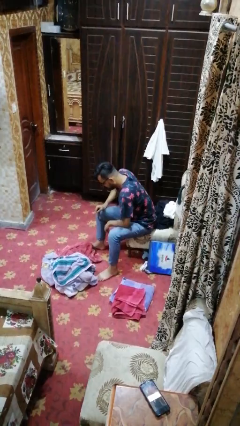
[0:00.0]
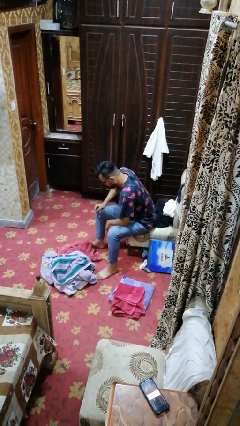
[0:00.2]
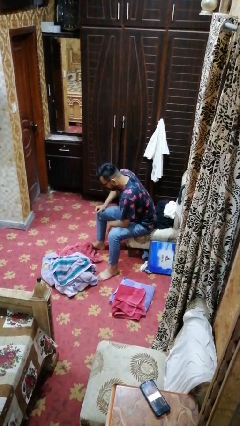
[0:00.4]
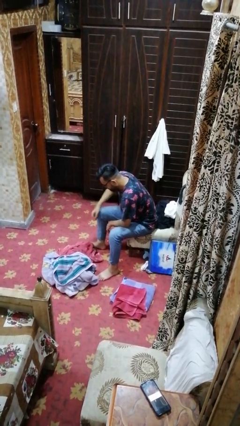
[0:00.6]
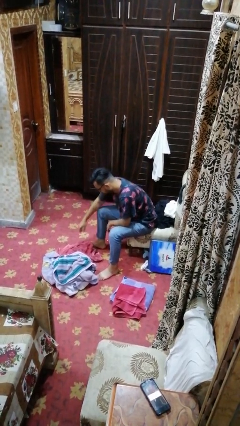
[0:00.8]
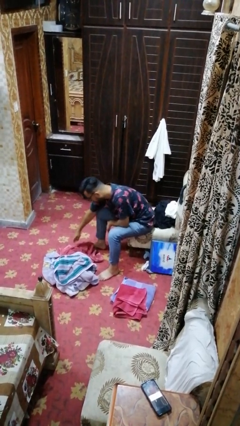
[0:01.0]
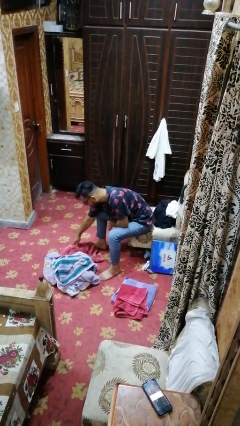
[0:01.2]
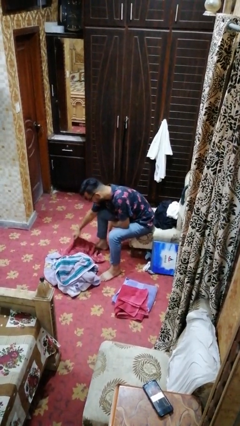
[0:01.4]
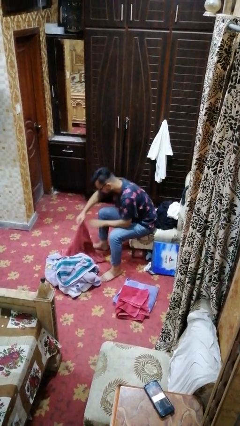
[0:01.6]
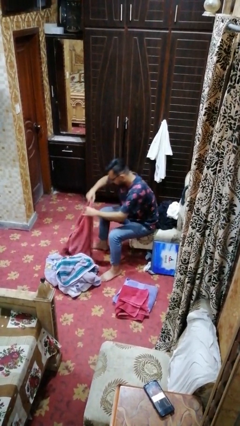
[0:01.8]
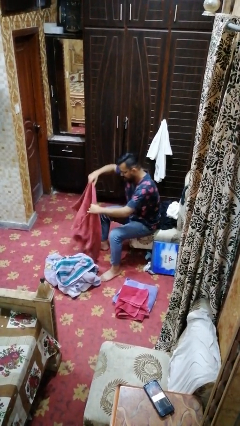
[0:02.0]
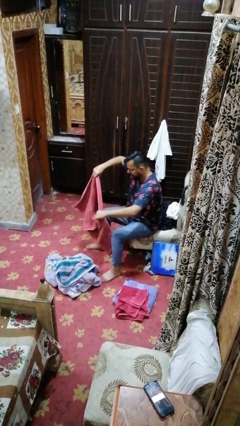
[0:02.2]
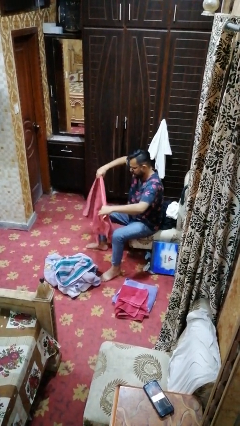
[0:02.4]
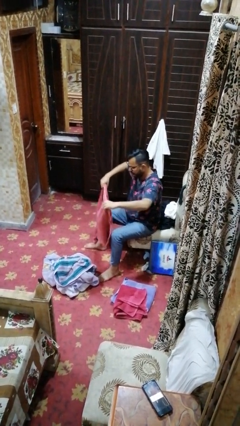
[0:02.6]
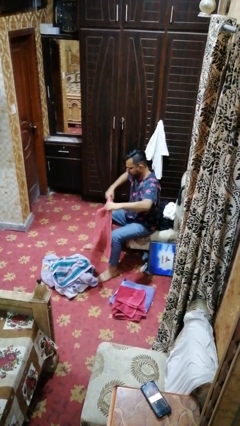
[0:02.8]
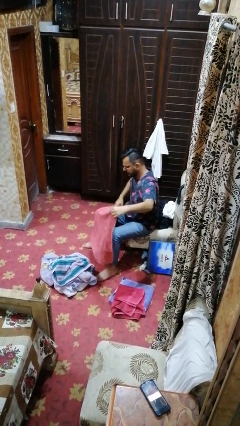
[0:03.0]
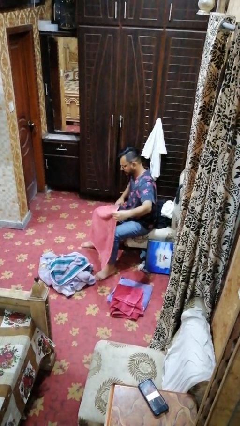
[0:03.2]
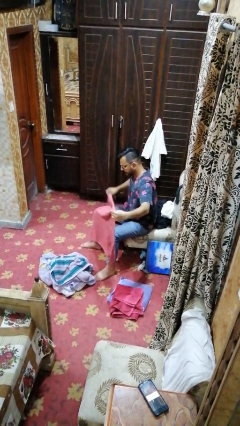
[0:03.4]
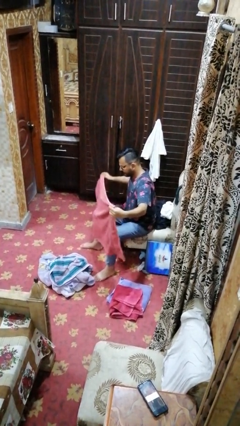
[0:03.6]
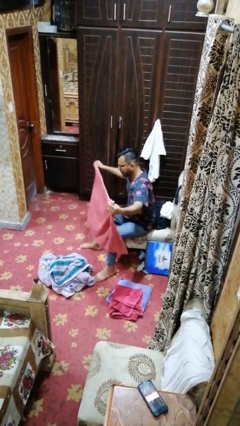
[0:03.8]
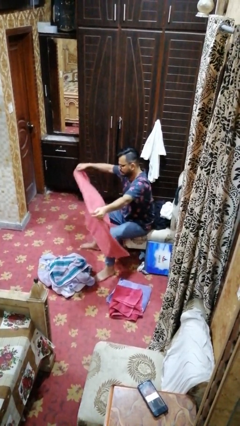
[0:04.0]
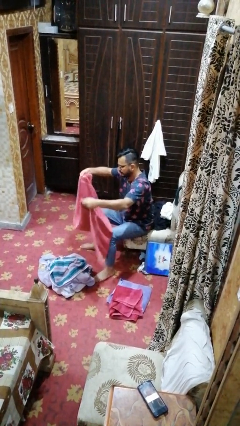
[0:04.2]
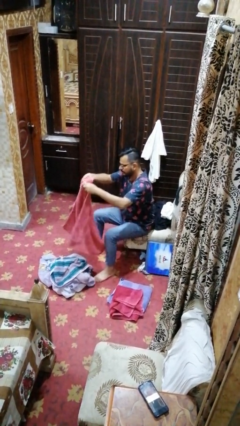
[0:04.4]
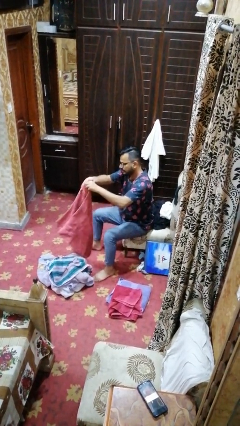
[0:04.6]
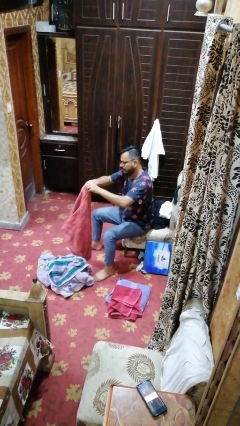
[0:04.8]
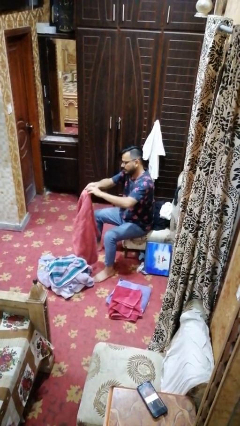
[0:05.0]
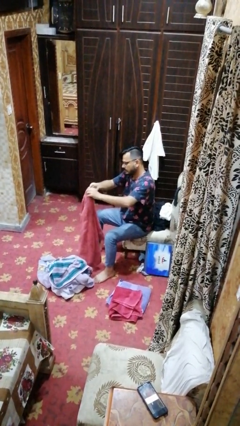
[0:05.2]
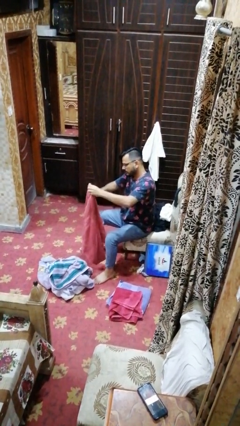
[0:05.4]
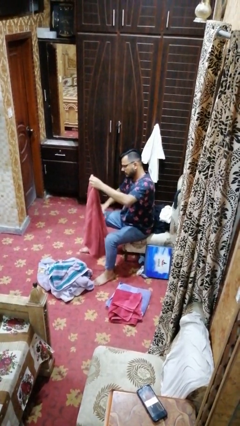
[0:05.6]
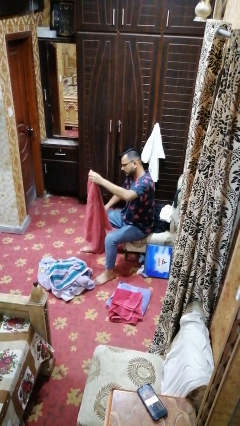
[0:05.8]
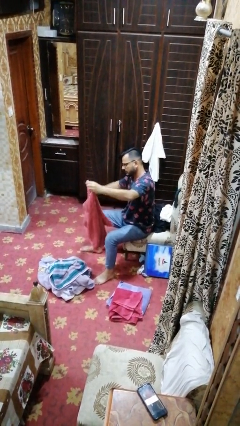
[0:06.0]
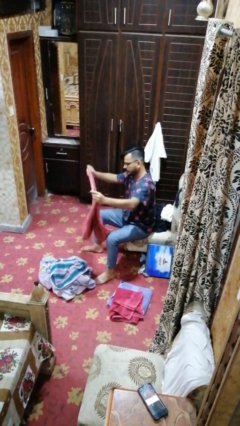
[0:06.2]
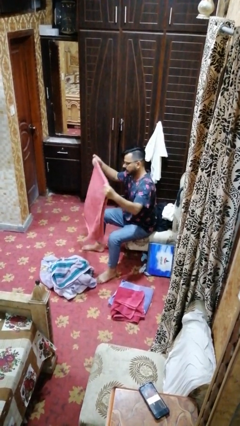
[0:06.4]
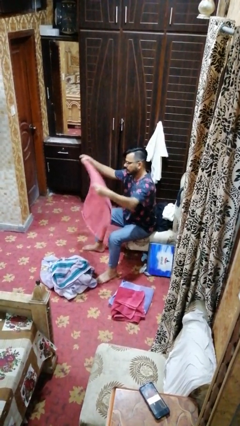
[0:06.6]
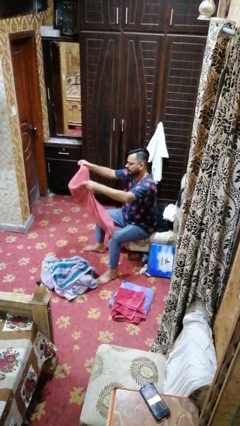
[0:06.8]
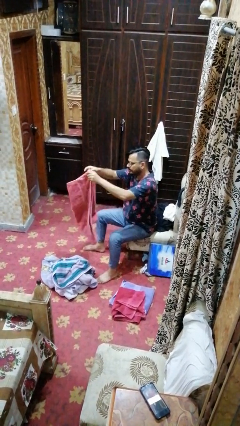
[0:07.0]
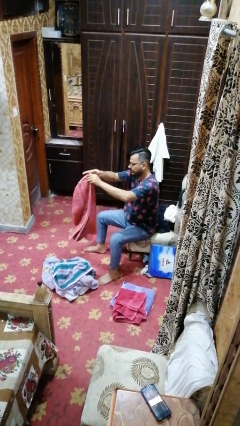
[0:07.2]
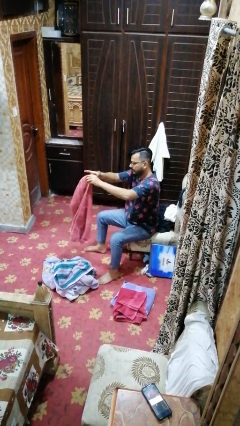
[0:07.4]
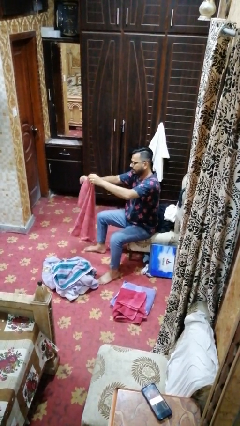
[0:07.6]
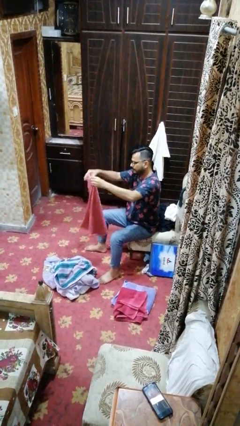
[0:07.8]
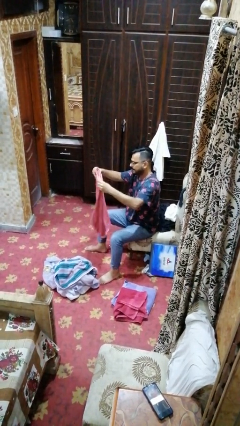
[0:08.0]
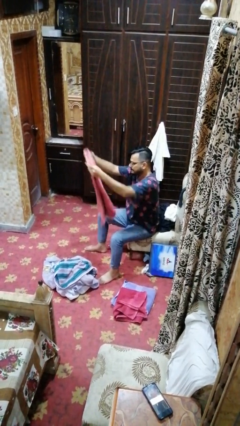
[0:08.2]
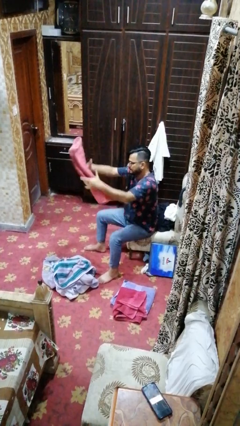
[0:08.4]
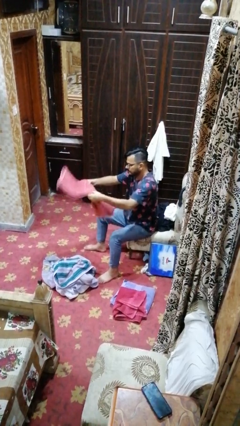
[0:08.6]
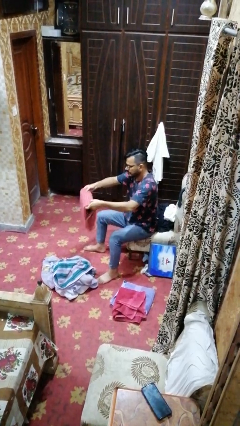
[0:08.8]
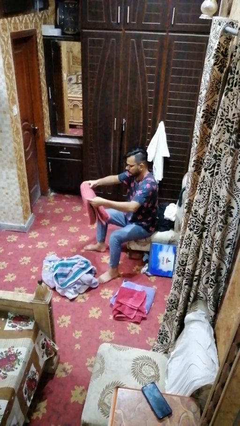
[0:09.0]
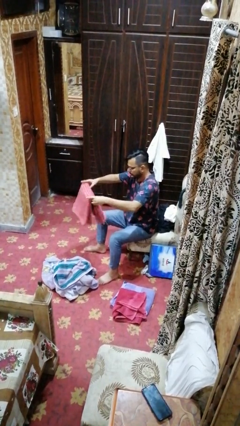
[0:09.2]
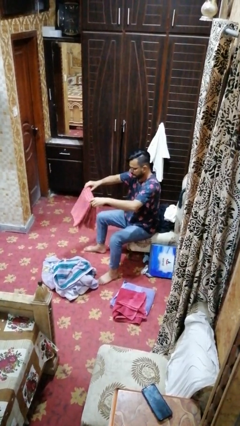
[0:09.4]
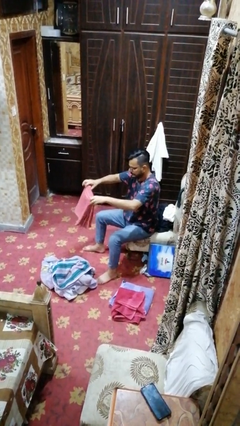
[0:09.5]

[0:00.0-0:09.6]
person folds towel

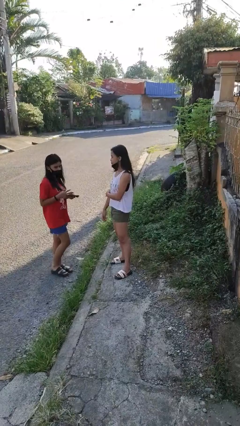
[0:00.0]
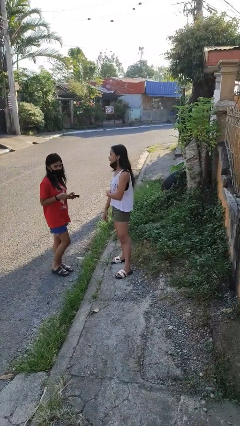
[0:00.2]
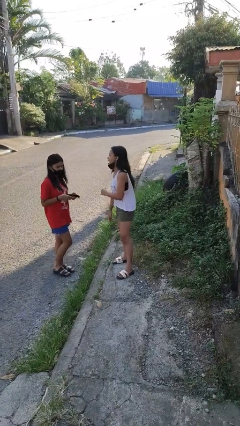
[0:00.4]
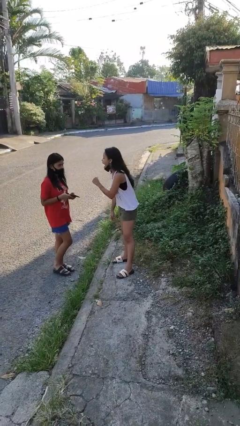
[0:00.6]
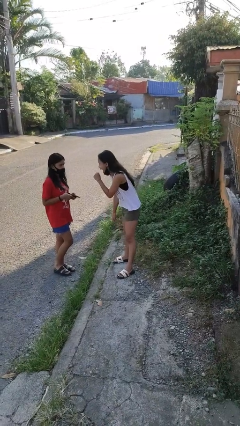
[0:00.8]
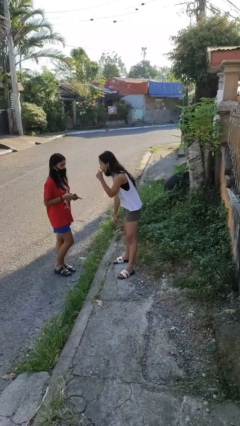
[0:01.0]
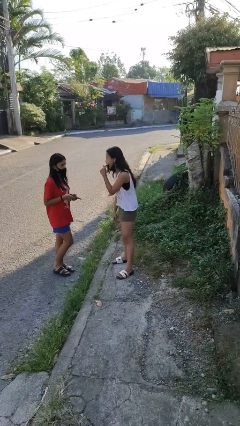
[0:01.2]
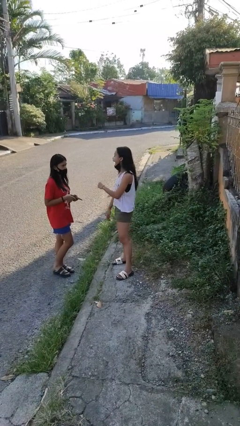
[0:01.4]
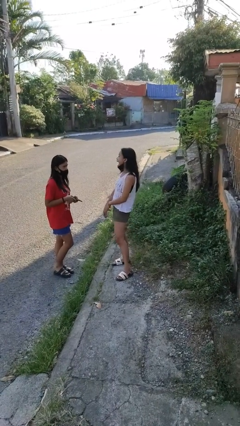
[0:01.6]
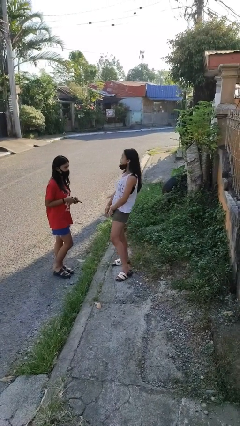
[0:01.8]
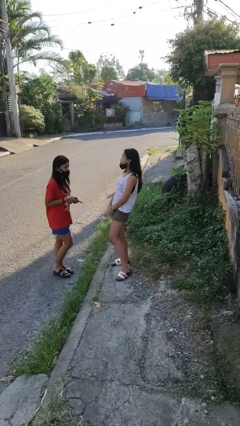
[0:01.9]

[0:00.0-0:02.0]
person laughs with person

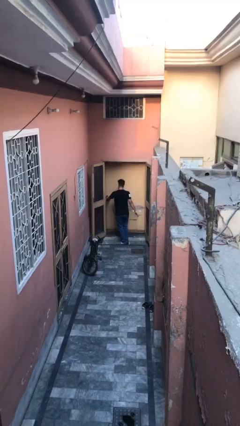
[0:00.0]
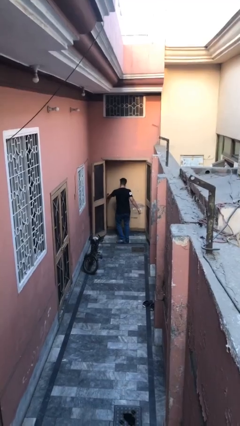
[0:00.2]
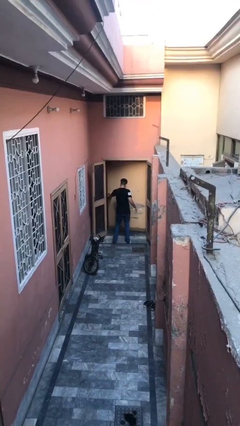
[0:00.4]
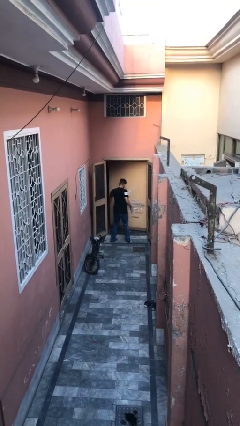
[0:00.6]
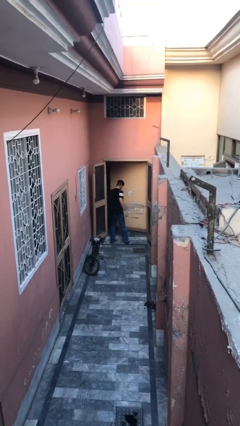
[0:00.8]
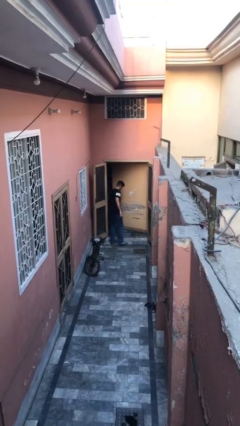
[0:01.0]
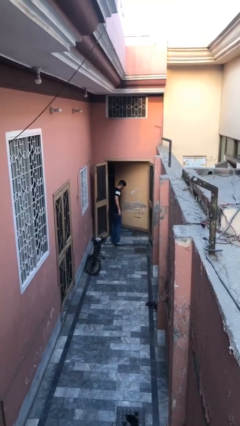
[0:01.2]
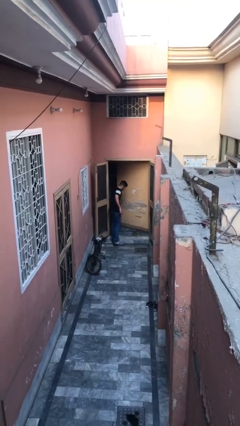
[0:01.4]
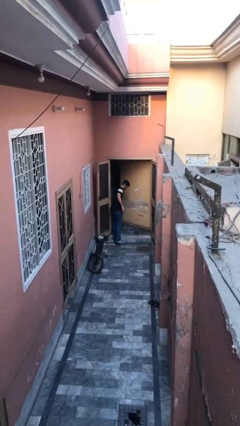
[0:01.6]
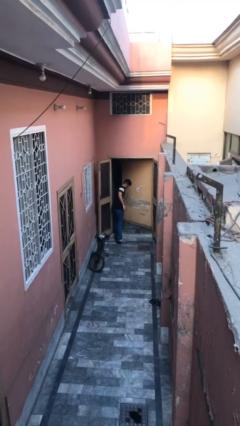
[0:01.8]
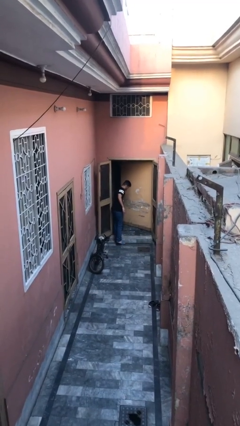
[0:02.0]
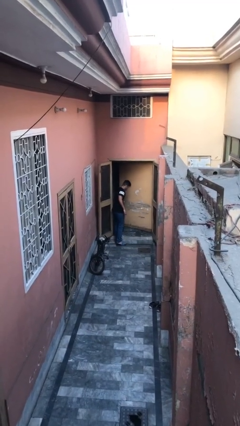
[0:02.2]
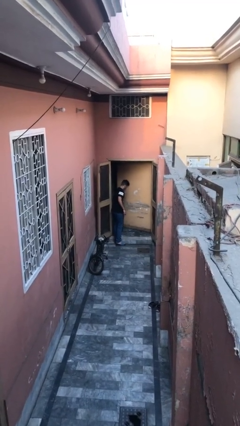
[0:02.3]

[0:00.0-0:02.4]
person opens facility door

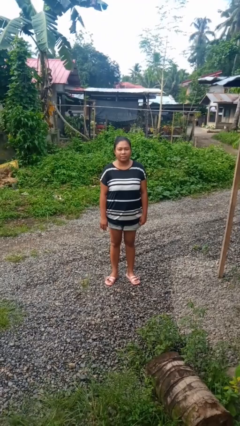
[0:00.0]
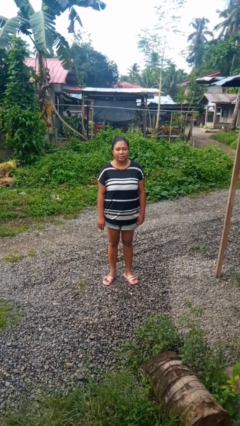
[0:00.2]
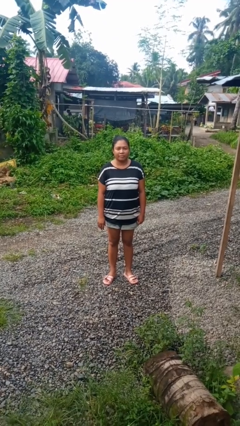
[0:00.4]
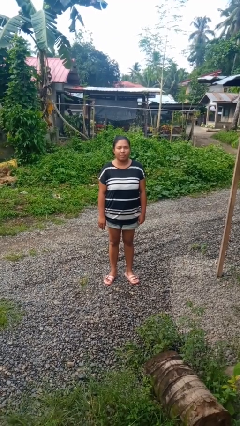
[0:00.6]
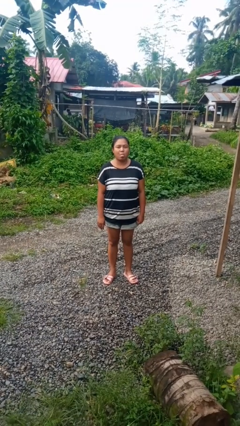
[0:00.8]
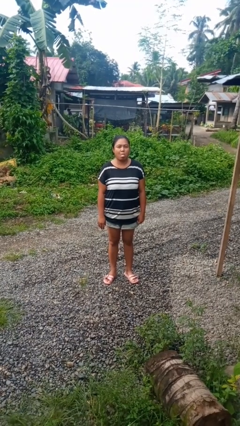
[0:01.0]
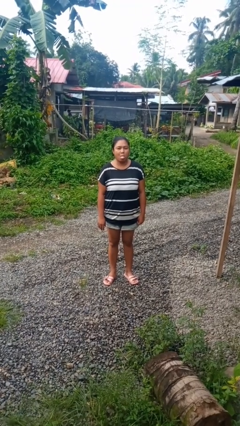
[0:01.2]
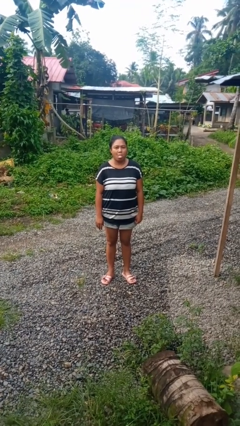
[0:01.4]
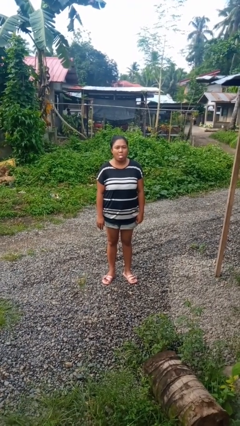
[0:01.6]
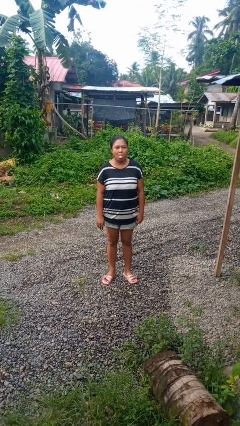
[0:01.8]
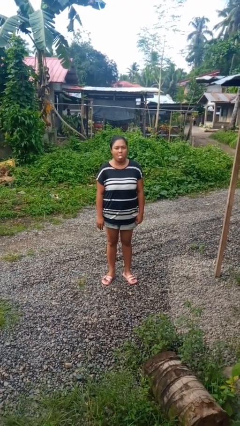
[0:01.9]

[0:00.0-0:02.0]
person sticks out tongue

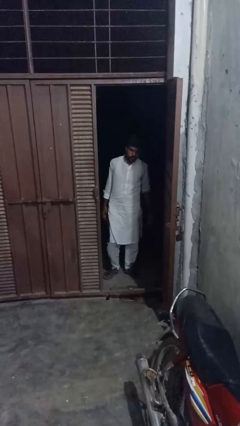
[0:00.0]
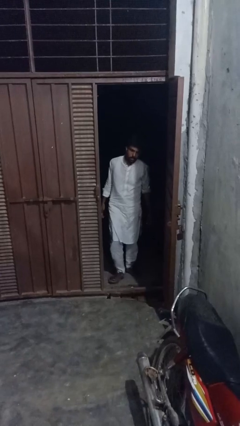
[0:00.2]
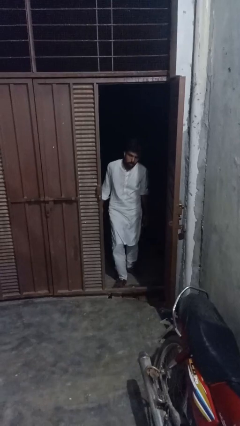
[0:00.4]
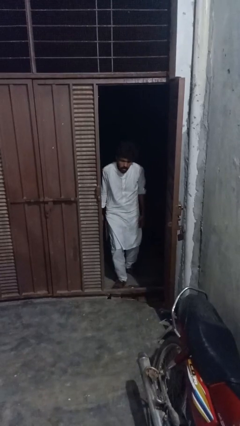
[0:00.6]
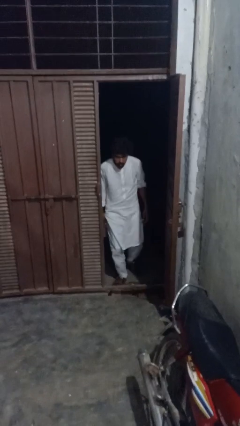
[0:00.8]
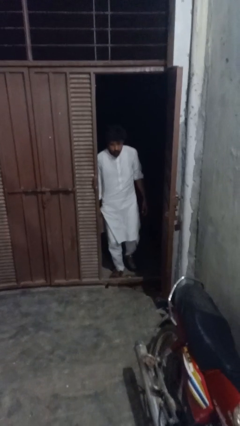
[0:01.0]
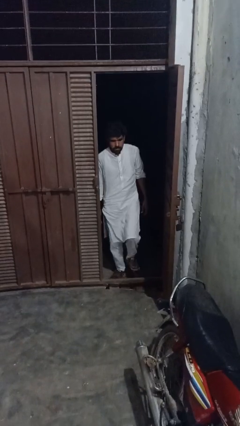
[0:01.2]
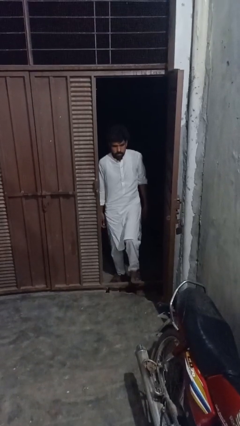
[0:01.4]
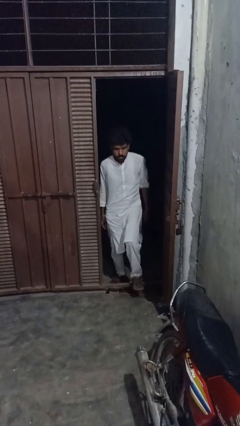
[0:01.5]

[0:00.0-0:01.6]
person bumps into wall

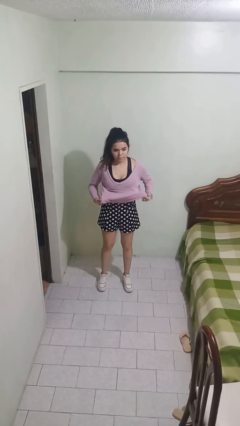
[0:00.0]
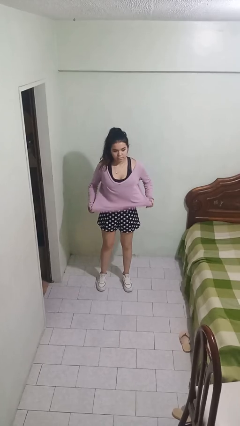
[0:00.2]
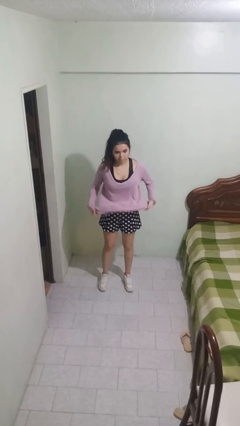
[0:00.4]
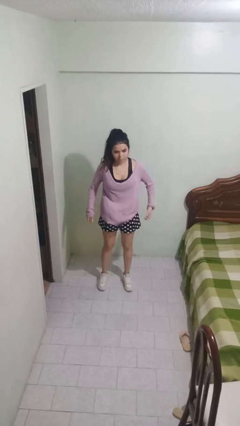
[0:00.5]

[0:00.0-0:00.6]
person untucks shirt
